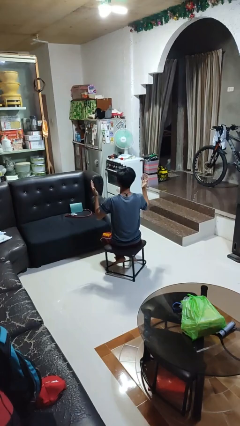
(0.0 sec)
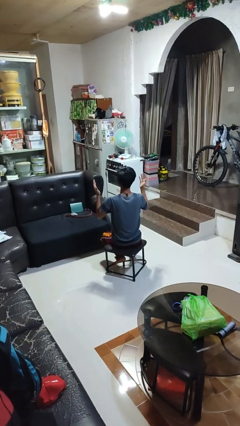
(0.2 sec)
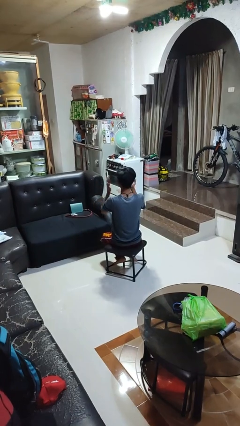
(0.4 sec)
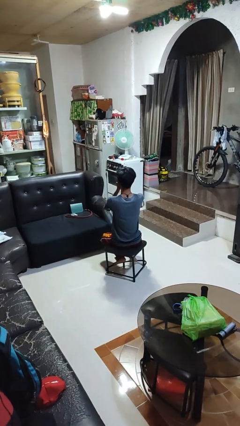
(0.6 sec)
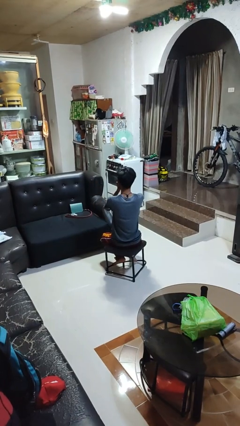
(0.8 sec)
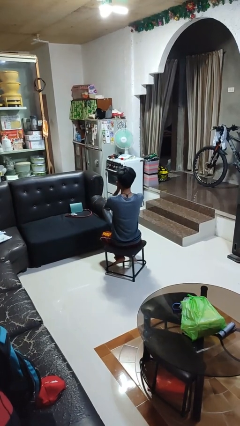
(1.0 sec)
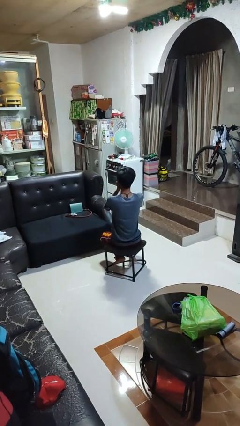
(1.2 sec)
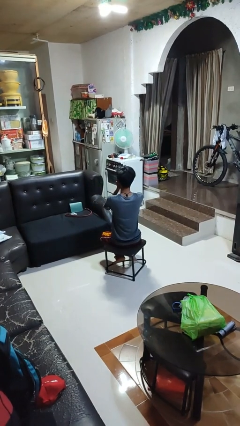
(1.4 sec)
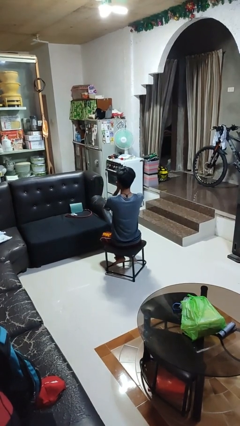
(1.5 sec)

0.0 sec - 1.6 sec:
person covers face with hands

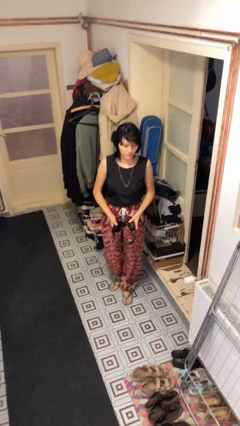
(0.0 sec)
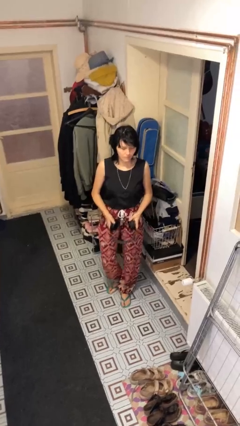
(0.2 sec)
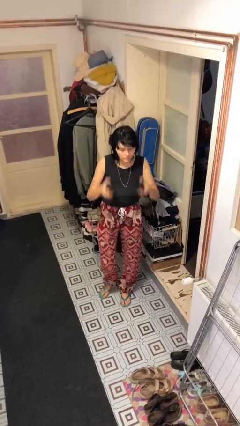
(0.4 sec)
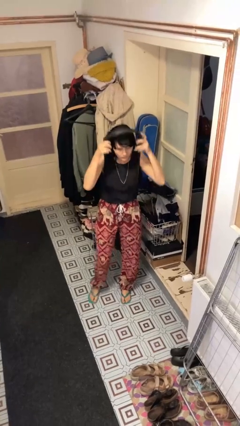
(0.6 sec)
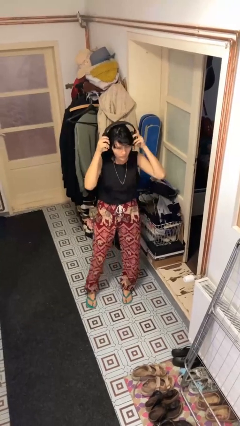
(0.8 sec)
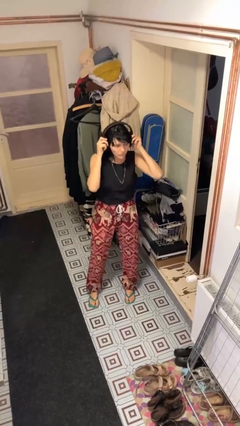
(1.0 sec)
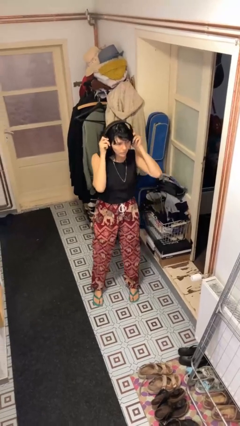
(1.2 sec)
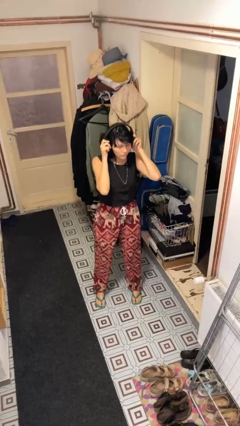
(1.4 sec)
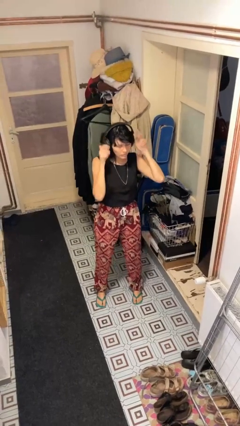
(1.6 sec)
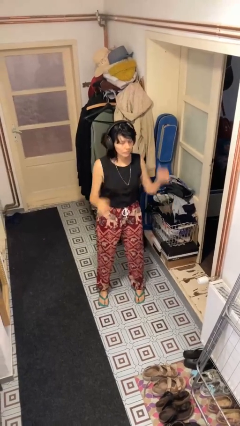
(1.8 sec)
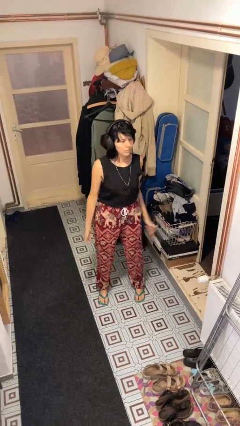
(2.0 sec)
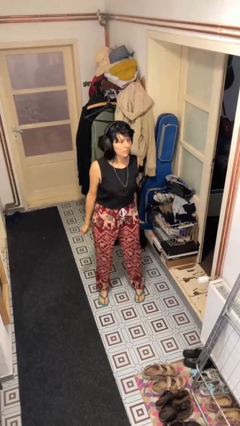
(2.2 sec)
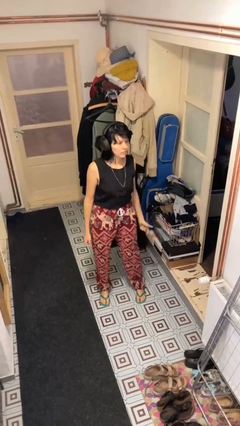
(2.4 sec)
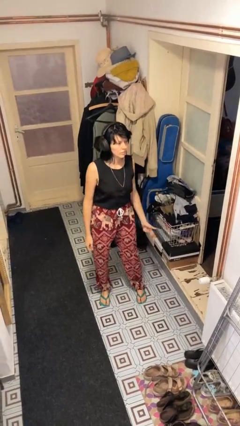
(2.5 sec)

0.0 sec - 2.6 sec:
person puts on headphones

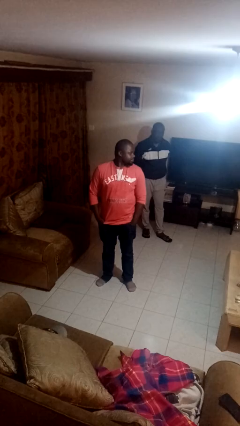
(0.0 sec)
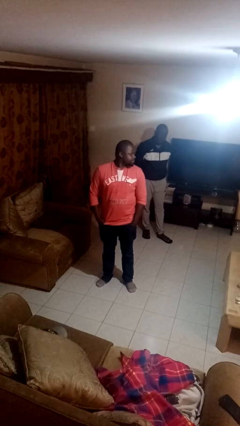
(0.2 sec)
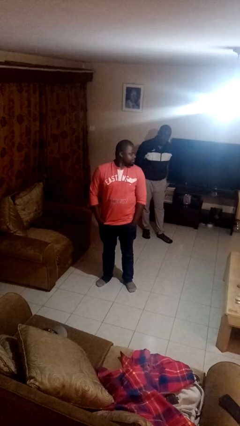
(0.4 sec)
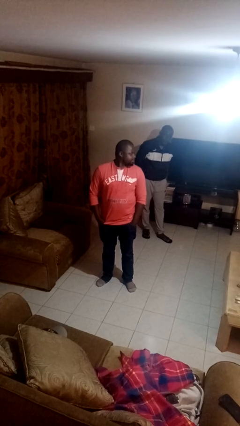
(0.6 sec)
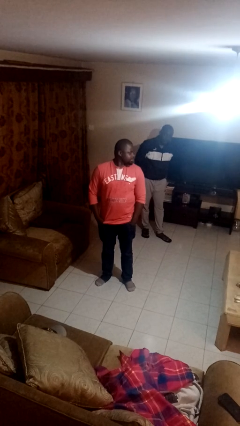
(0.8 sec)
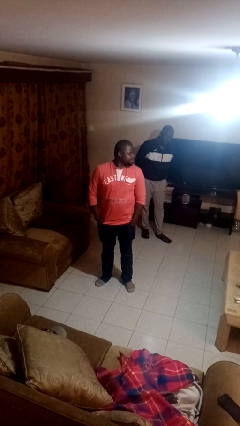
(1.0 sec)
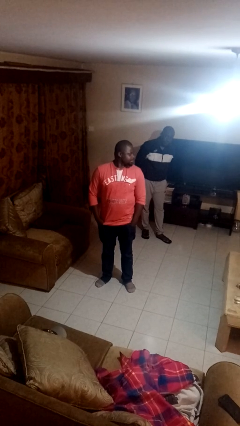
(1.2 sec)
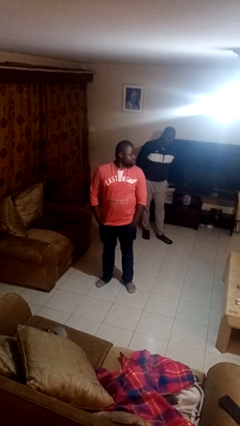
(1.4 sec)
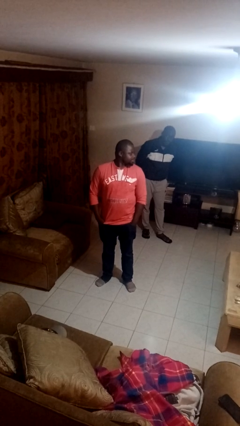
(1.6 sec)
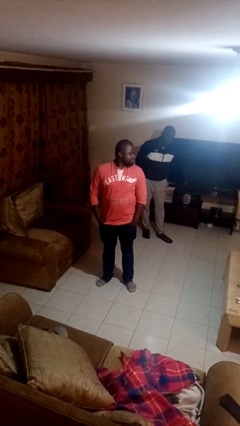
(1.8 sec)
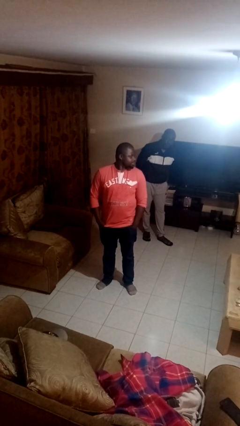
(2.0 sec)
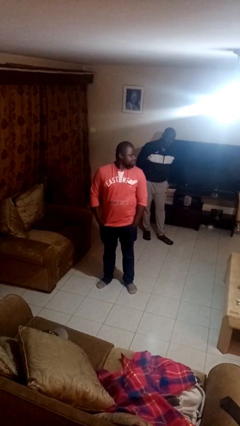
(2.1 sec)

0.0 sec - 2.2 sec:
person looks over shoulder

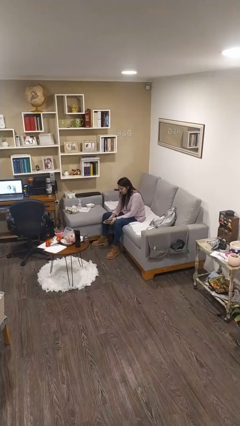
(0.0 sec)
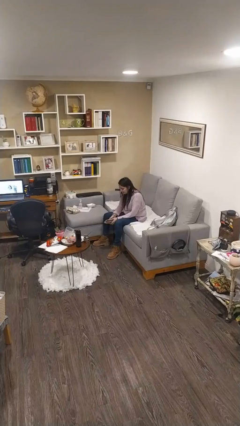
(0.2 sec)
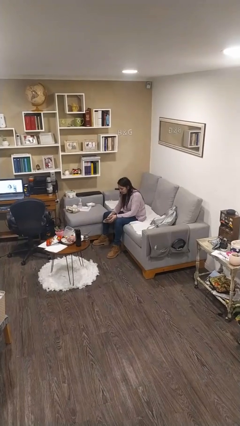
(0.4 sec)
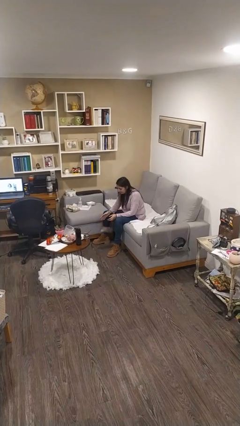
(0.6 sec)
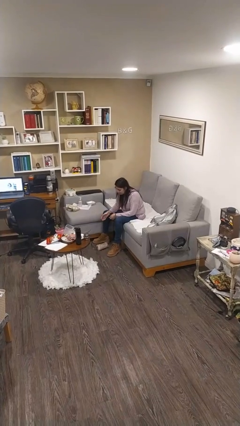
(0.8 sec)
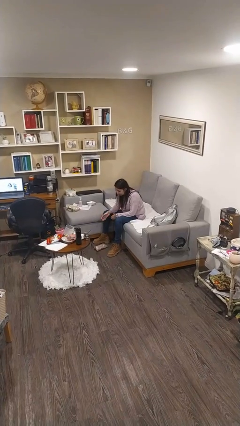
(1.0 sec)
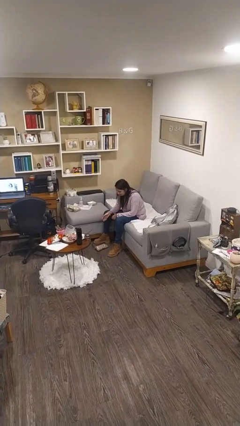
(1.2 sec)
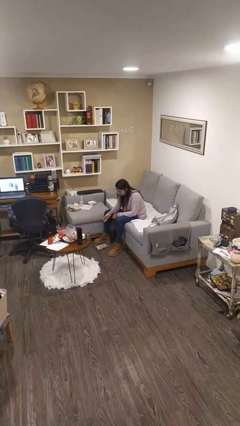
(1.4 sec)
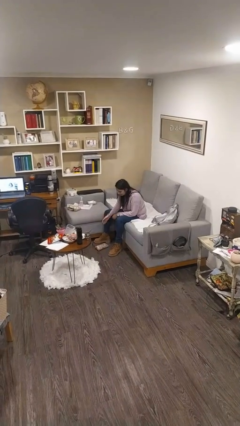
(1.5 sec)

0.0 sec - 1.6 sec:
person drops object

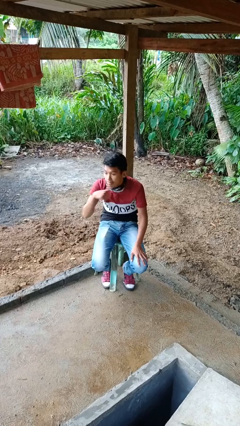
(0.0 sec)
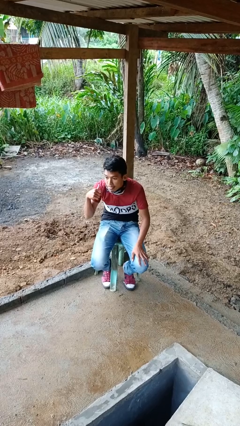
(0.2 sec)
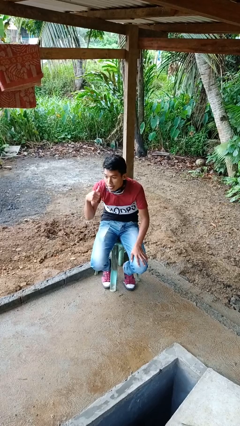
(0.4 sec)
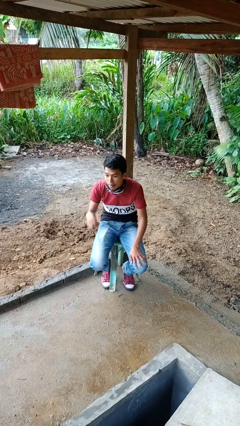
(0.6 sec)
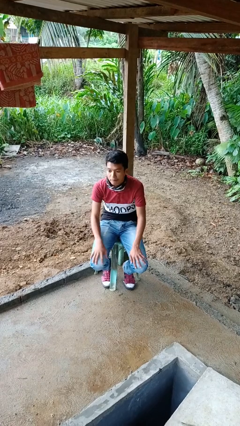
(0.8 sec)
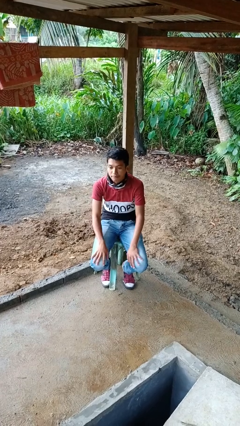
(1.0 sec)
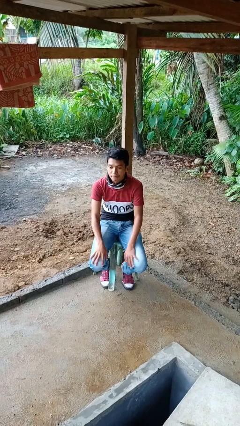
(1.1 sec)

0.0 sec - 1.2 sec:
person gestures cut

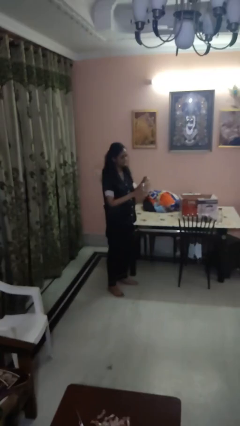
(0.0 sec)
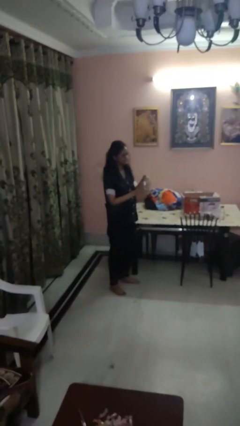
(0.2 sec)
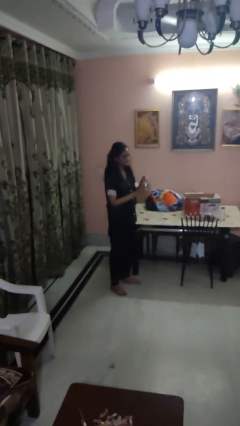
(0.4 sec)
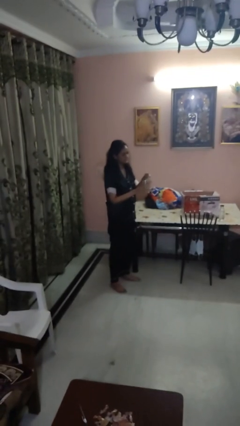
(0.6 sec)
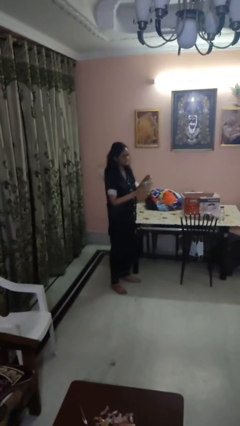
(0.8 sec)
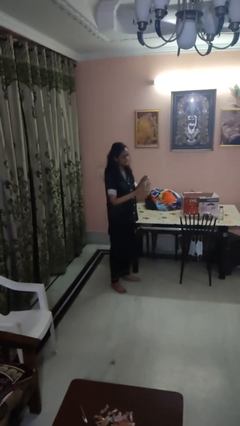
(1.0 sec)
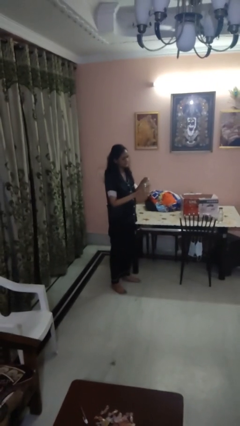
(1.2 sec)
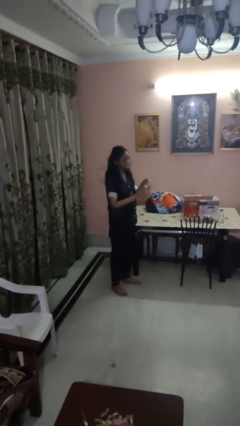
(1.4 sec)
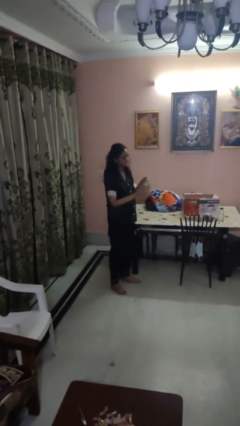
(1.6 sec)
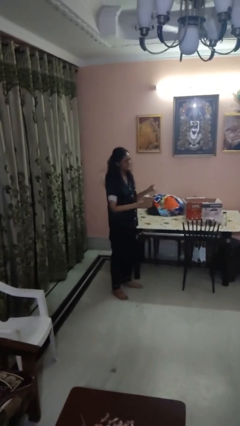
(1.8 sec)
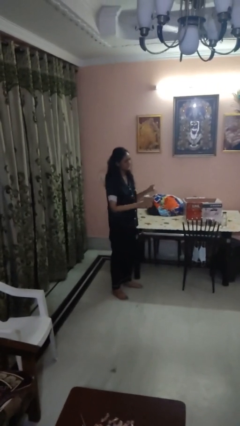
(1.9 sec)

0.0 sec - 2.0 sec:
person opens can with can opener

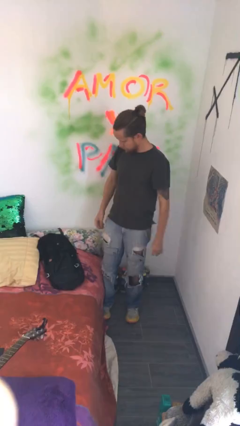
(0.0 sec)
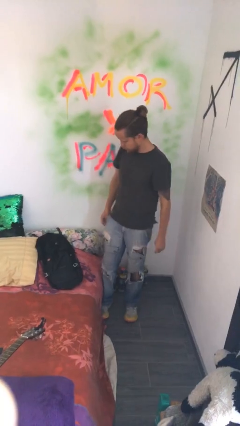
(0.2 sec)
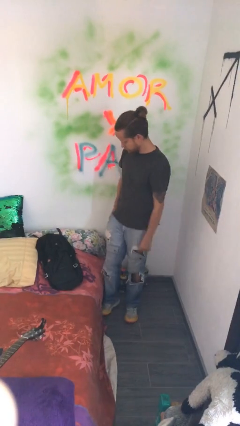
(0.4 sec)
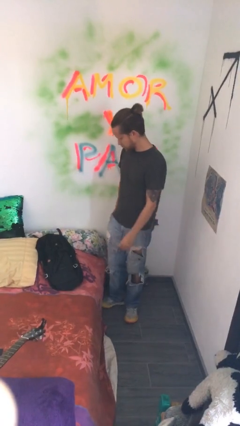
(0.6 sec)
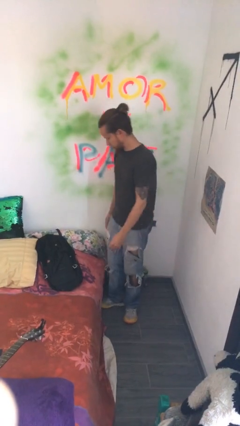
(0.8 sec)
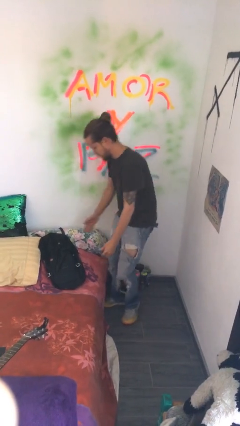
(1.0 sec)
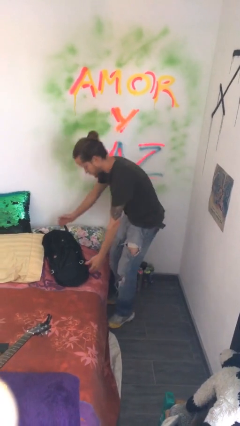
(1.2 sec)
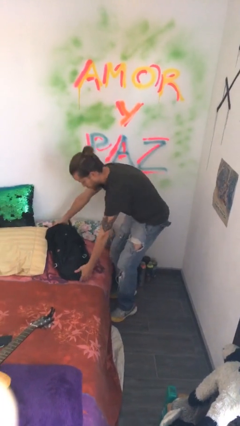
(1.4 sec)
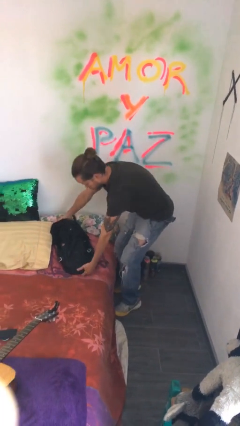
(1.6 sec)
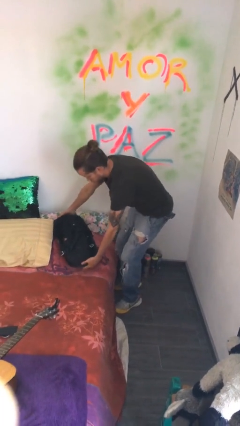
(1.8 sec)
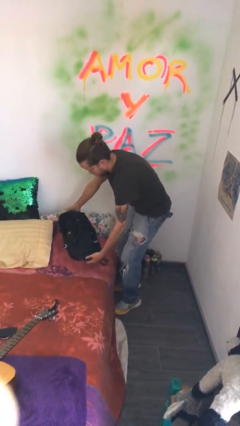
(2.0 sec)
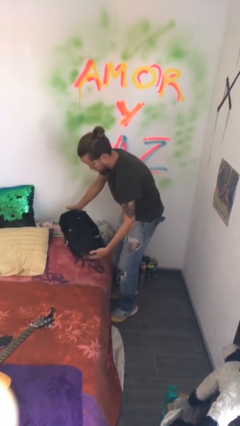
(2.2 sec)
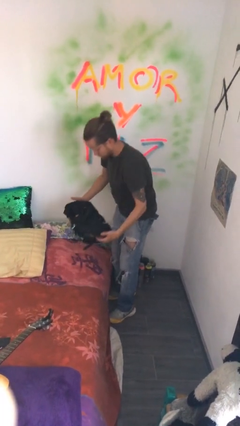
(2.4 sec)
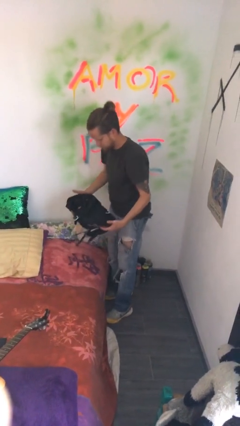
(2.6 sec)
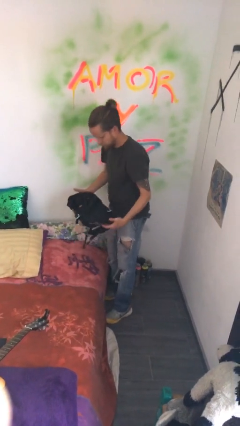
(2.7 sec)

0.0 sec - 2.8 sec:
person picks up object from bed

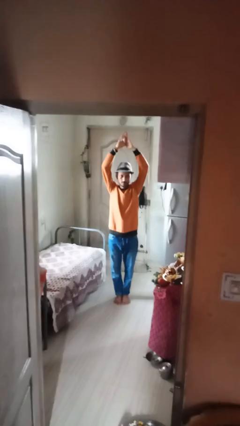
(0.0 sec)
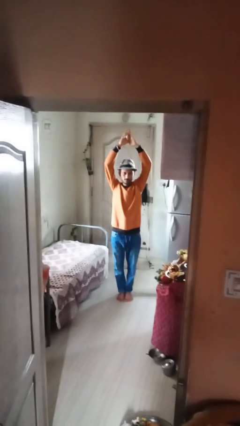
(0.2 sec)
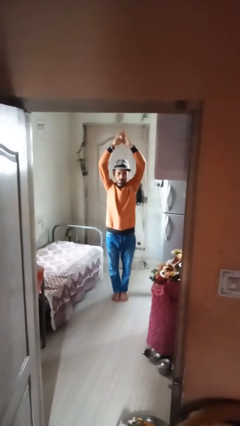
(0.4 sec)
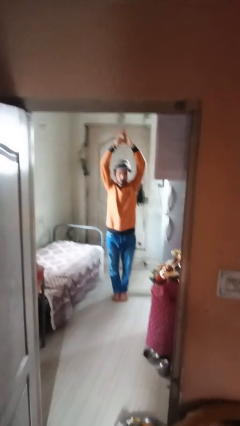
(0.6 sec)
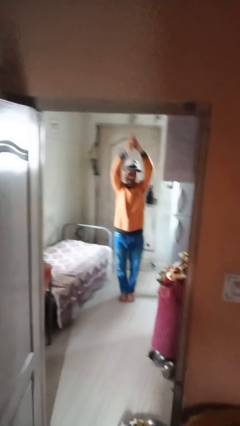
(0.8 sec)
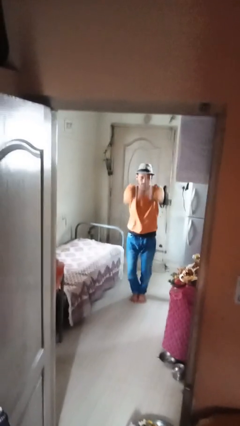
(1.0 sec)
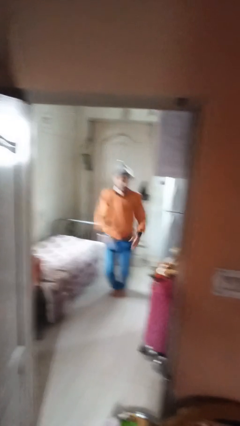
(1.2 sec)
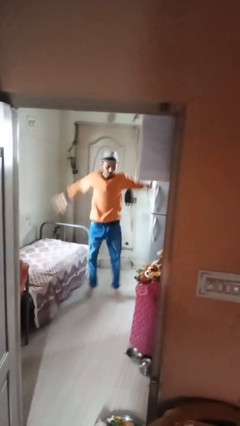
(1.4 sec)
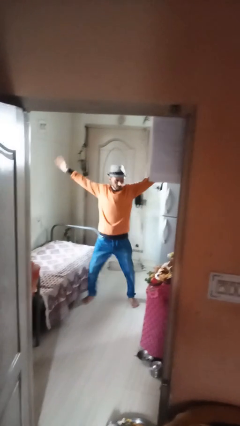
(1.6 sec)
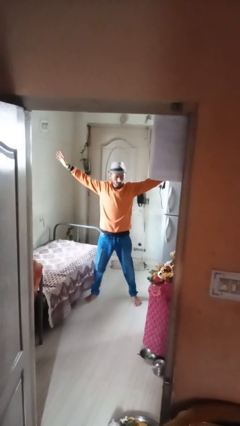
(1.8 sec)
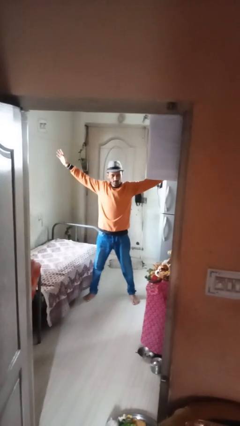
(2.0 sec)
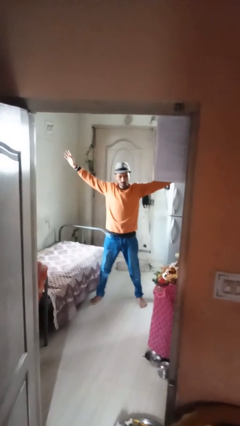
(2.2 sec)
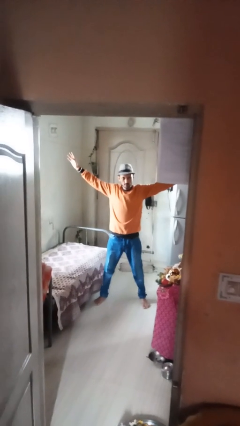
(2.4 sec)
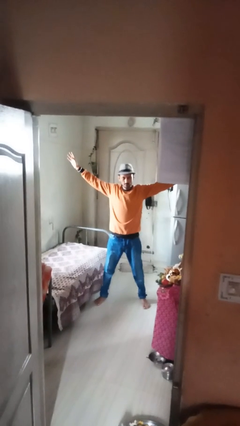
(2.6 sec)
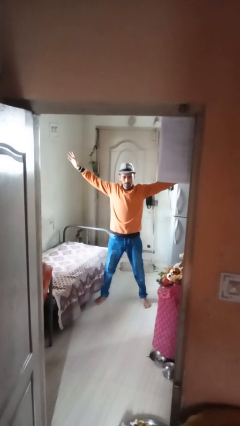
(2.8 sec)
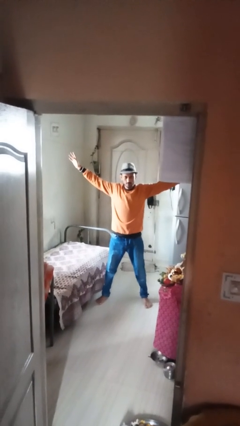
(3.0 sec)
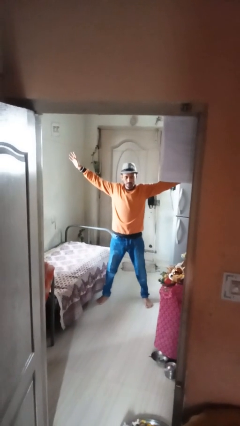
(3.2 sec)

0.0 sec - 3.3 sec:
person exercises with jumping jacks
